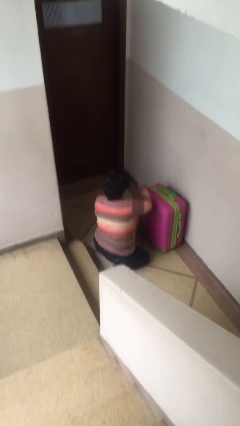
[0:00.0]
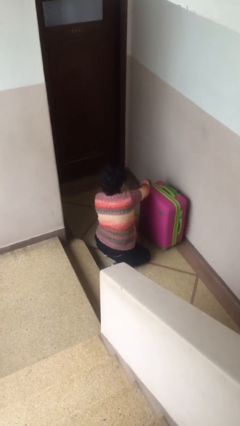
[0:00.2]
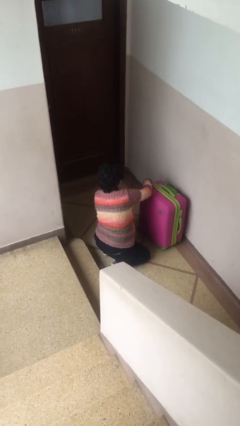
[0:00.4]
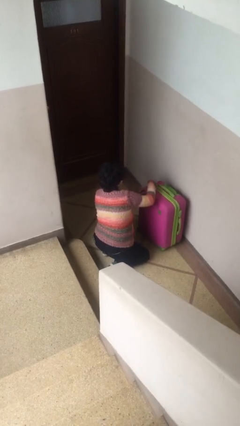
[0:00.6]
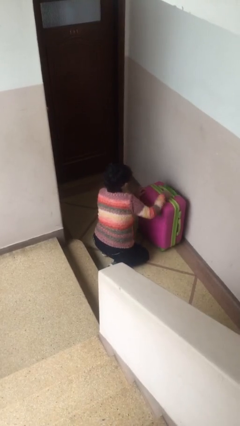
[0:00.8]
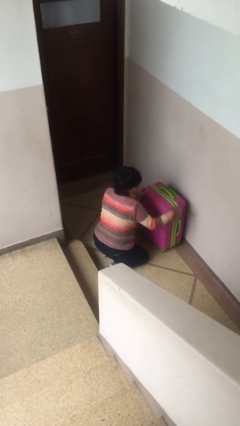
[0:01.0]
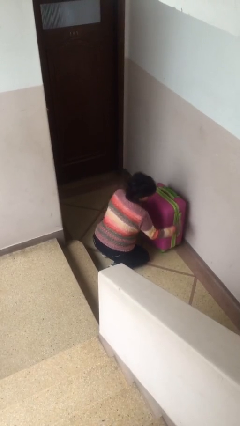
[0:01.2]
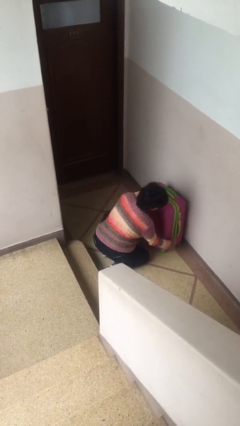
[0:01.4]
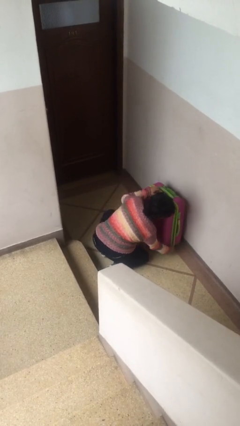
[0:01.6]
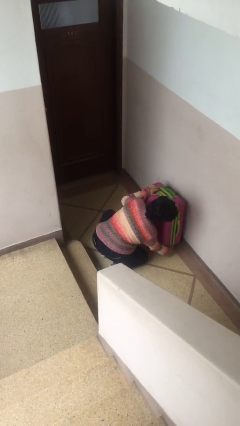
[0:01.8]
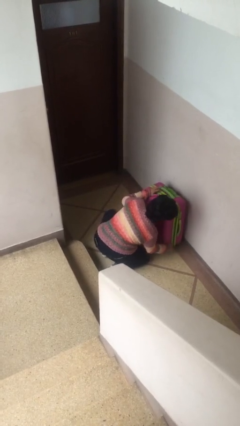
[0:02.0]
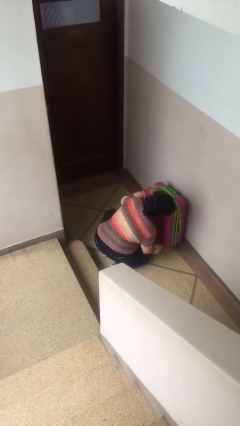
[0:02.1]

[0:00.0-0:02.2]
person opens suitcase

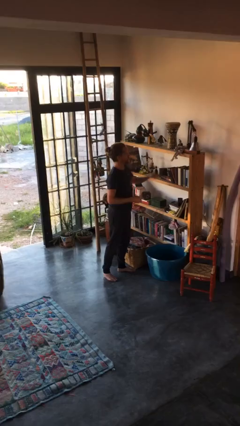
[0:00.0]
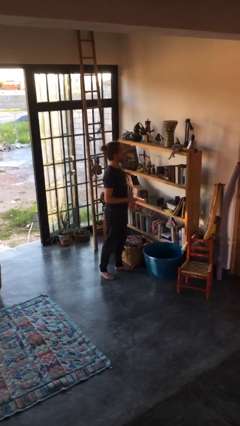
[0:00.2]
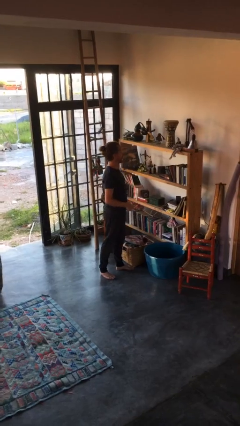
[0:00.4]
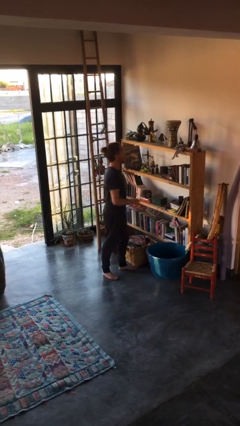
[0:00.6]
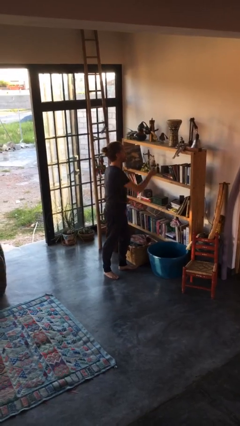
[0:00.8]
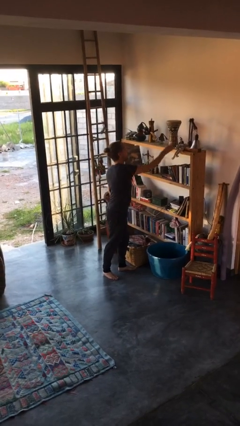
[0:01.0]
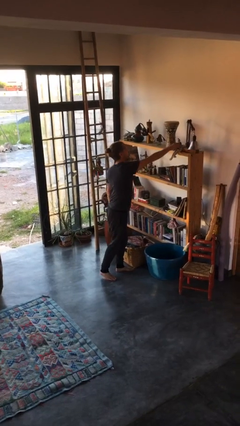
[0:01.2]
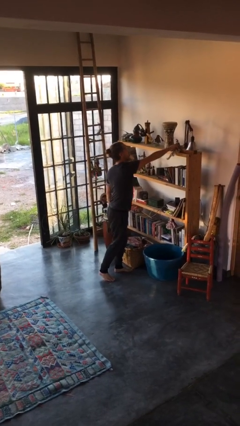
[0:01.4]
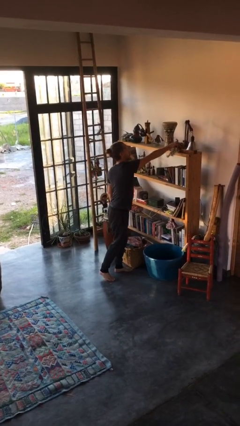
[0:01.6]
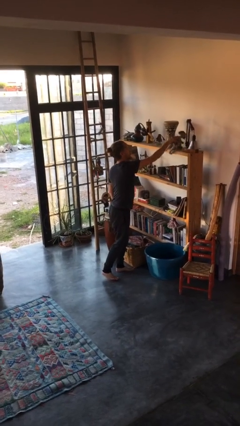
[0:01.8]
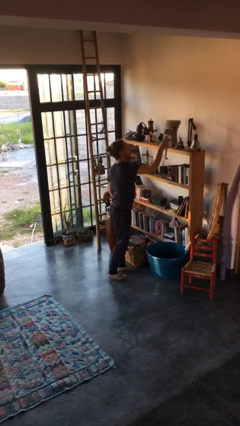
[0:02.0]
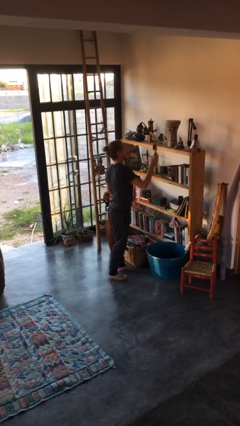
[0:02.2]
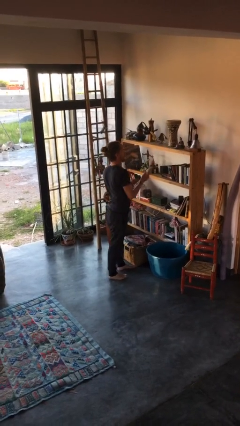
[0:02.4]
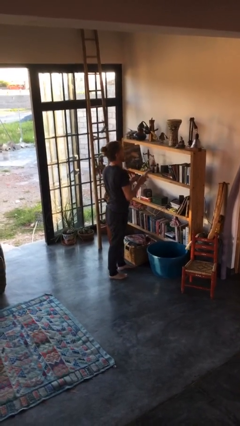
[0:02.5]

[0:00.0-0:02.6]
person picks up object from countertop

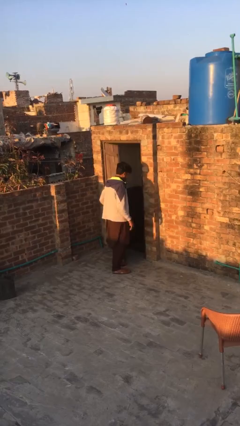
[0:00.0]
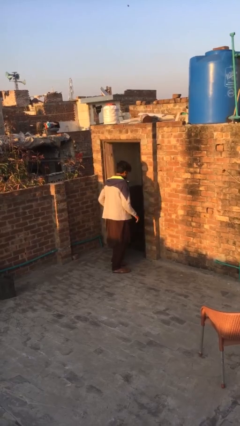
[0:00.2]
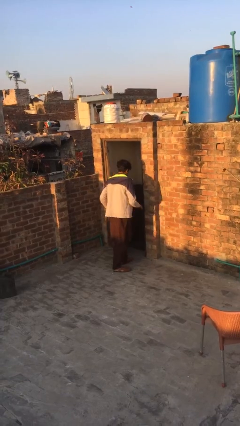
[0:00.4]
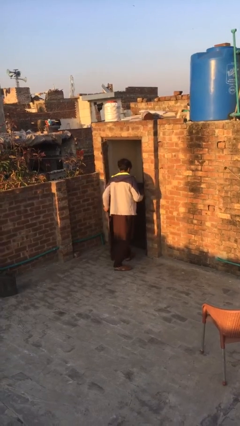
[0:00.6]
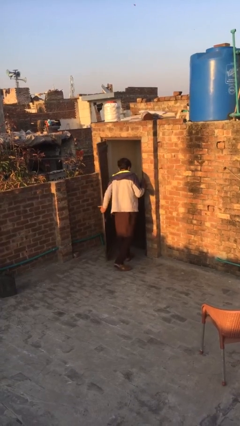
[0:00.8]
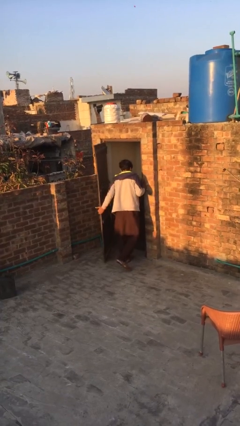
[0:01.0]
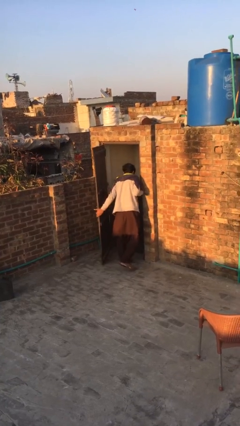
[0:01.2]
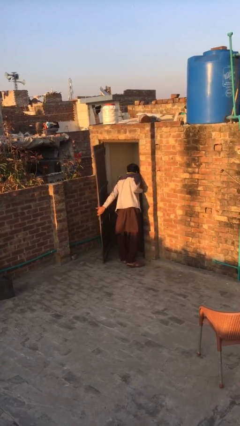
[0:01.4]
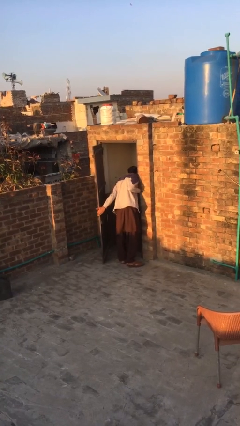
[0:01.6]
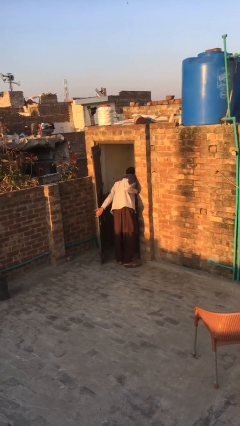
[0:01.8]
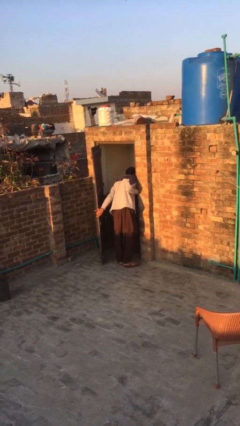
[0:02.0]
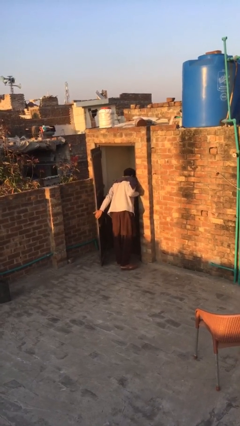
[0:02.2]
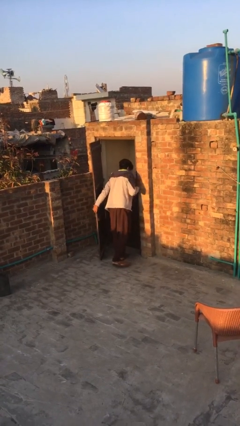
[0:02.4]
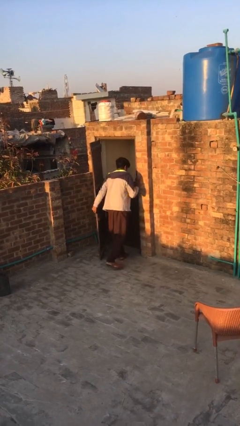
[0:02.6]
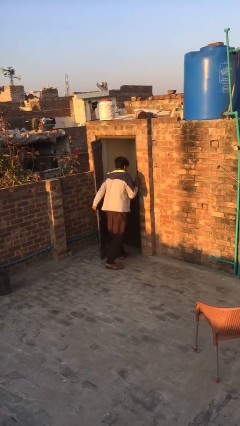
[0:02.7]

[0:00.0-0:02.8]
person opens facility door

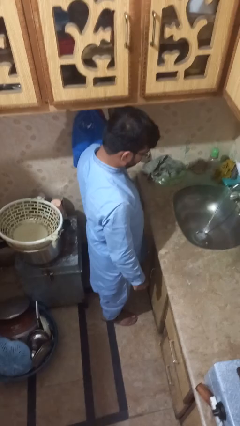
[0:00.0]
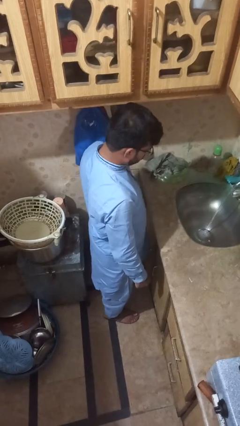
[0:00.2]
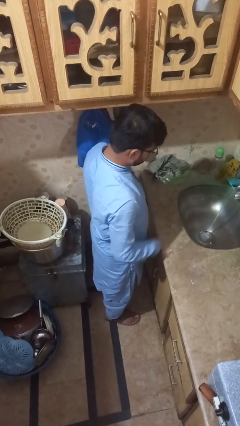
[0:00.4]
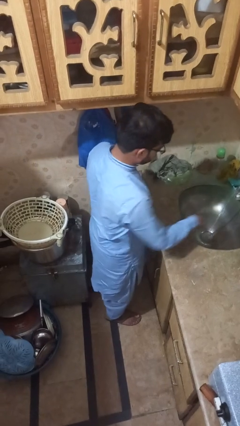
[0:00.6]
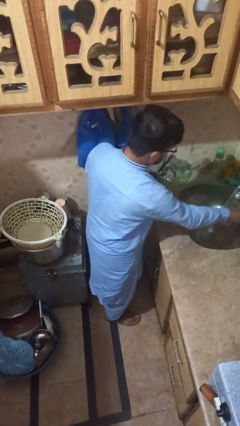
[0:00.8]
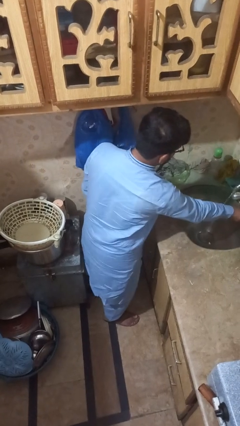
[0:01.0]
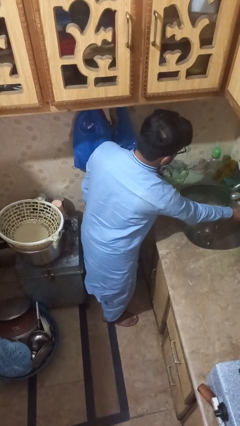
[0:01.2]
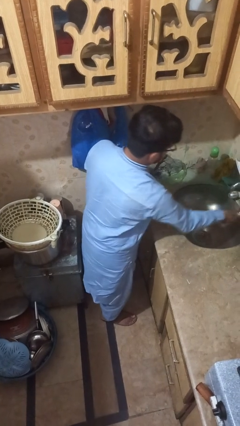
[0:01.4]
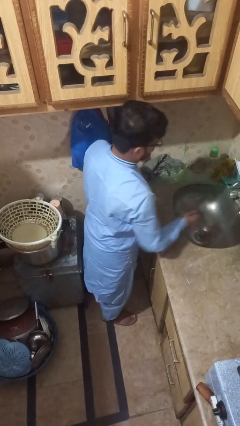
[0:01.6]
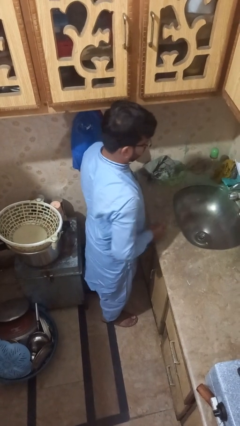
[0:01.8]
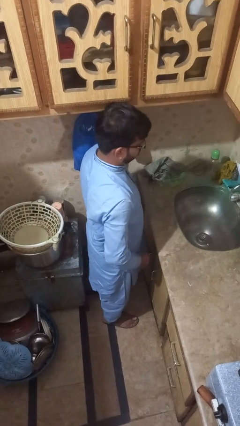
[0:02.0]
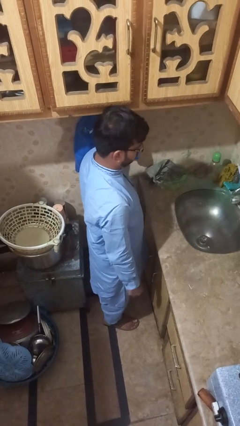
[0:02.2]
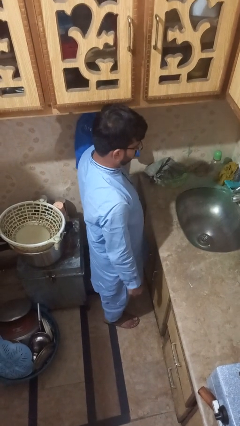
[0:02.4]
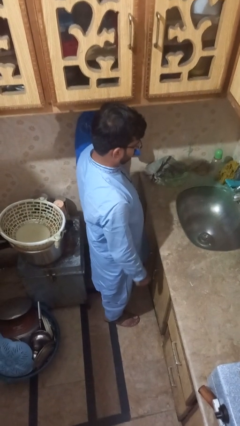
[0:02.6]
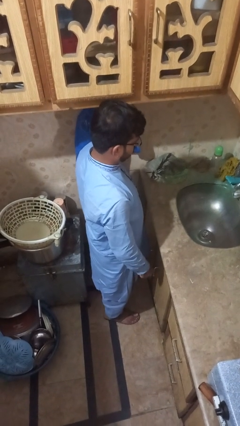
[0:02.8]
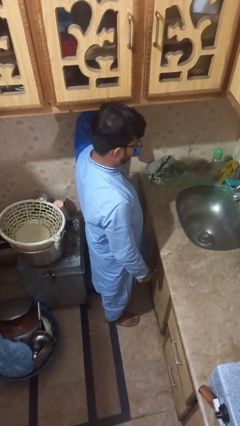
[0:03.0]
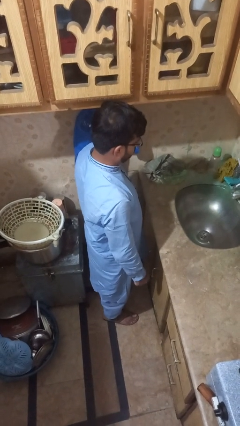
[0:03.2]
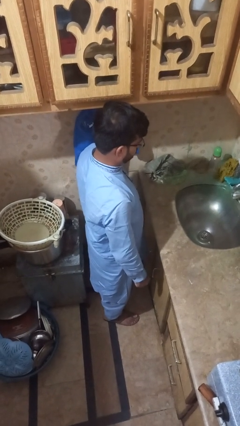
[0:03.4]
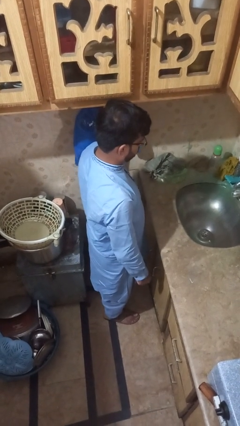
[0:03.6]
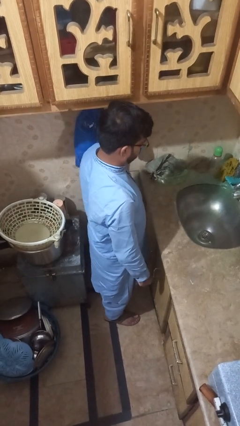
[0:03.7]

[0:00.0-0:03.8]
person turns off faucet

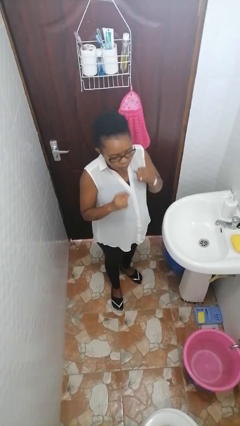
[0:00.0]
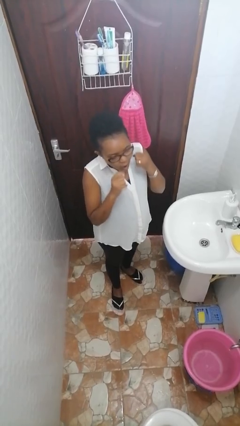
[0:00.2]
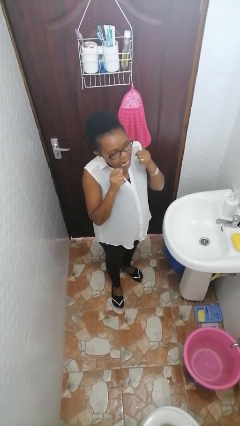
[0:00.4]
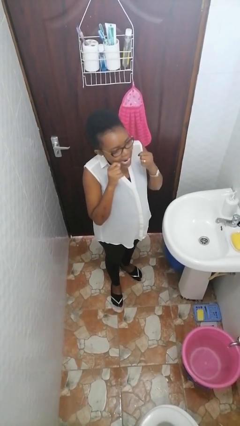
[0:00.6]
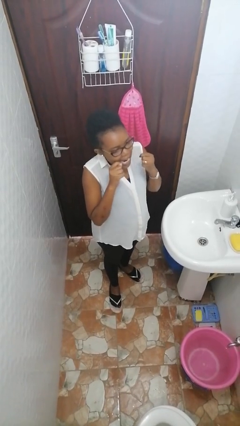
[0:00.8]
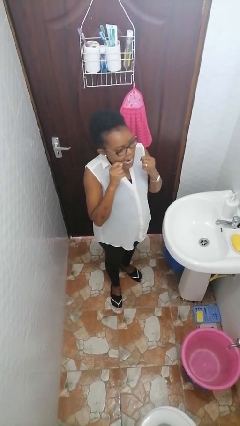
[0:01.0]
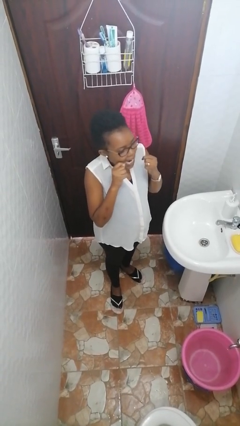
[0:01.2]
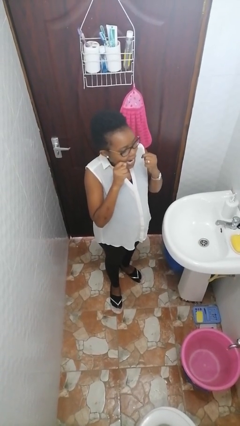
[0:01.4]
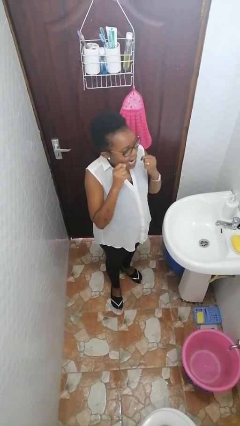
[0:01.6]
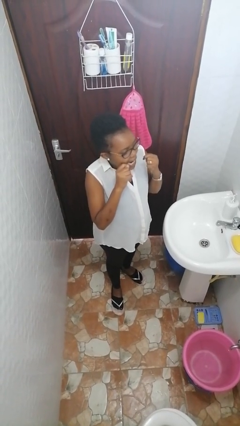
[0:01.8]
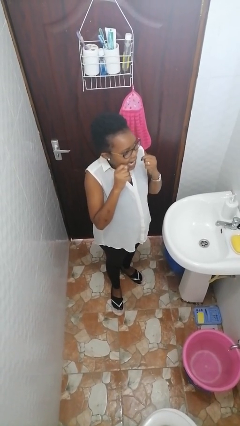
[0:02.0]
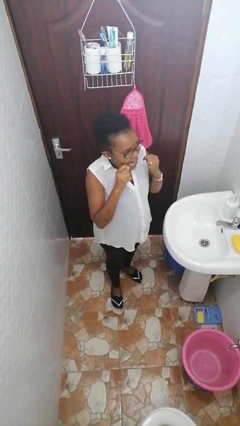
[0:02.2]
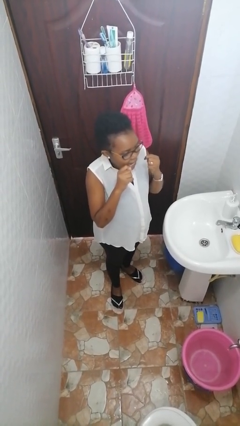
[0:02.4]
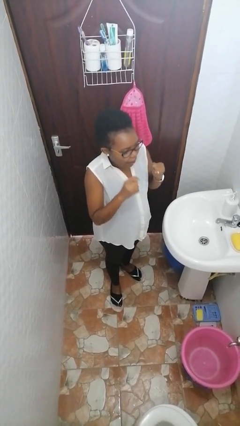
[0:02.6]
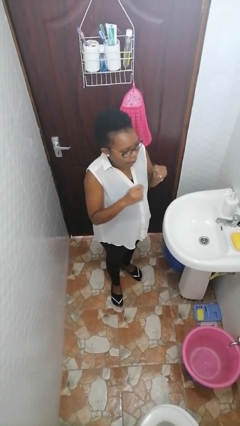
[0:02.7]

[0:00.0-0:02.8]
person flosses

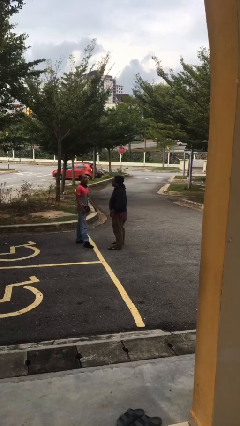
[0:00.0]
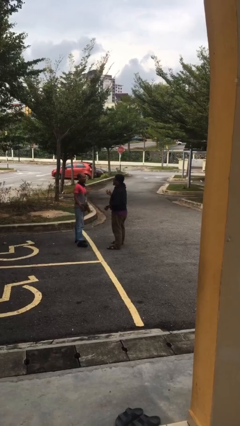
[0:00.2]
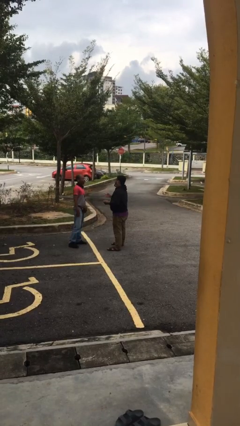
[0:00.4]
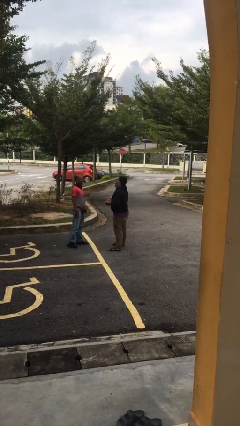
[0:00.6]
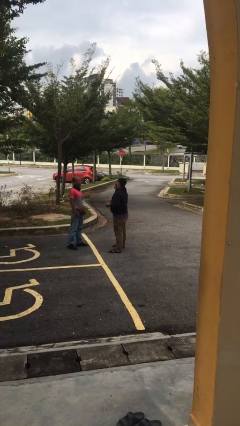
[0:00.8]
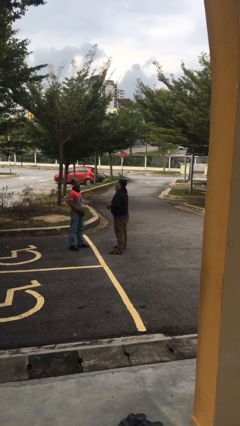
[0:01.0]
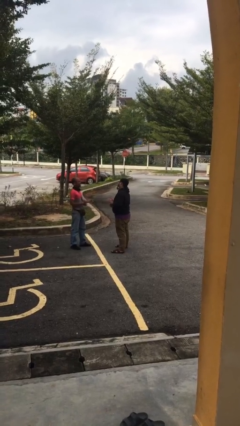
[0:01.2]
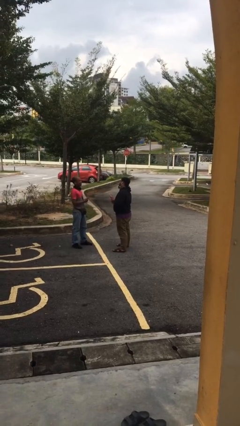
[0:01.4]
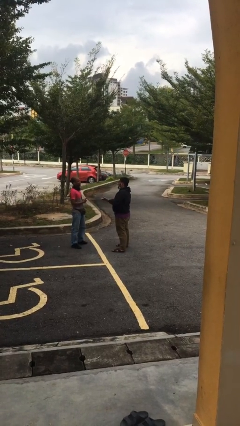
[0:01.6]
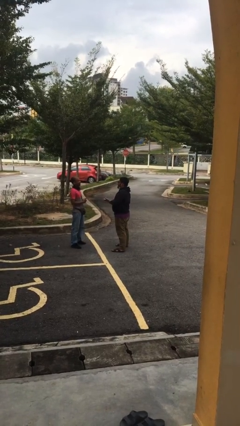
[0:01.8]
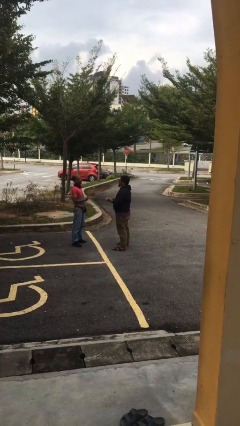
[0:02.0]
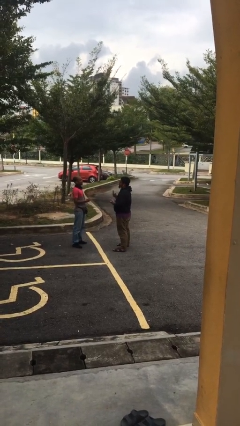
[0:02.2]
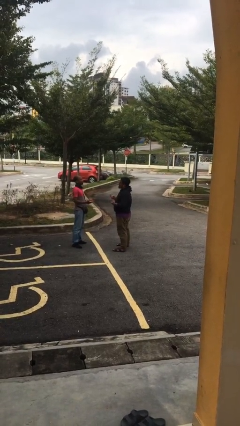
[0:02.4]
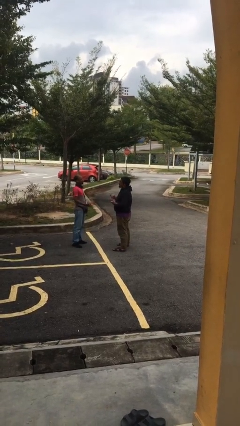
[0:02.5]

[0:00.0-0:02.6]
person talks to person

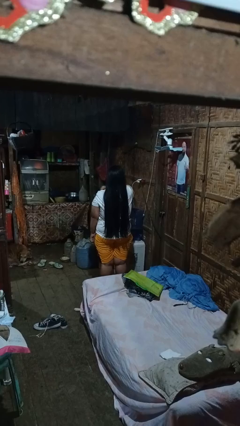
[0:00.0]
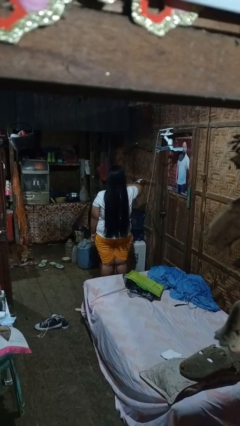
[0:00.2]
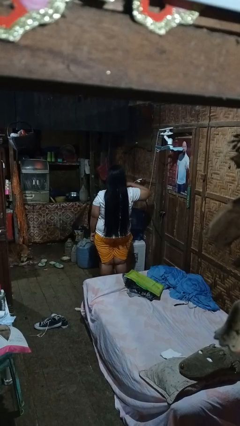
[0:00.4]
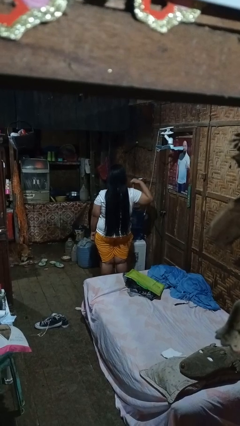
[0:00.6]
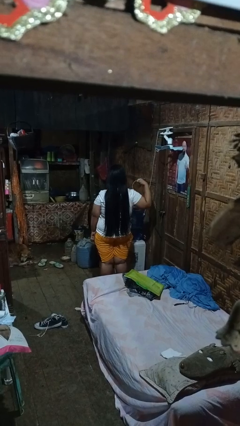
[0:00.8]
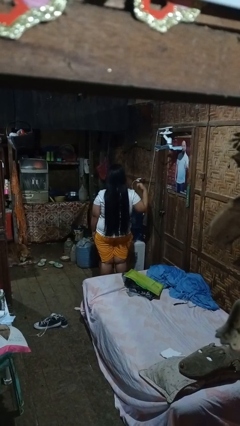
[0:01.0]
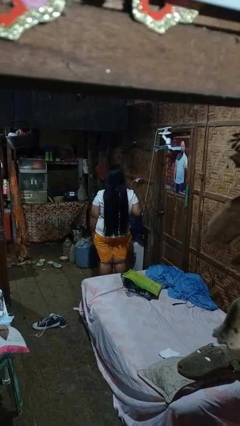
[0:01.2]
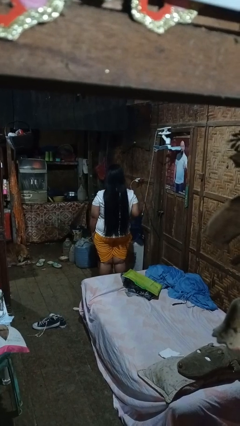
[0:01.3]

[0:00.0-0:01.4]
person gestures cut
